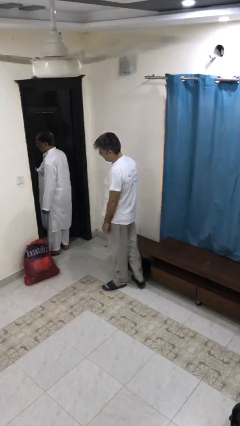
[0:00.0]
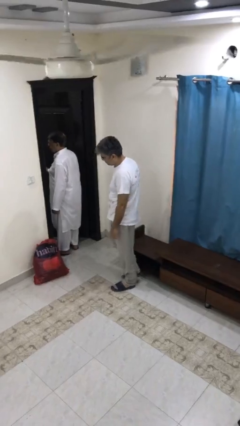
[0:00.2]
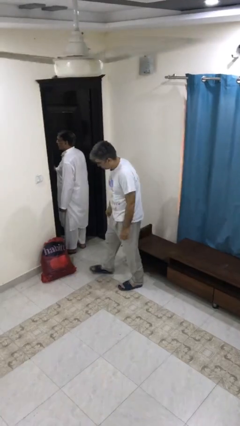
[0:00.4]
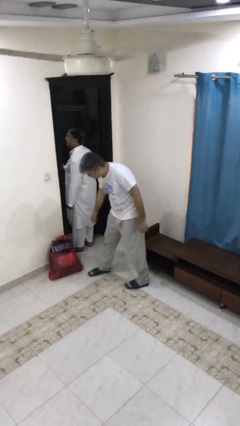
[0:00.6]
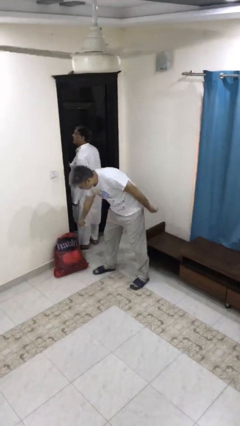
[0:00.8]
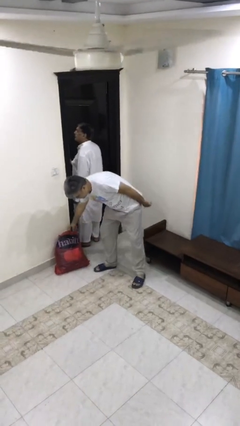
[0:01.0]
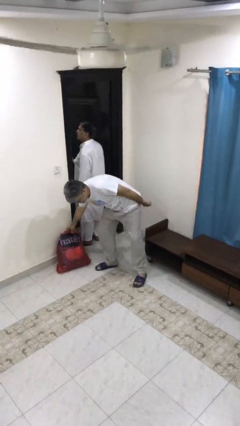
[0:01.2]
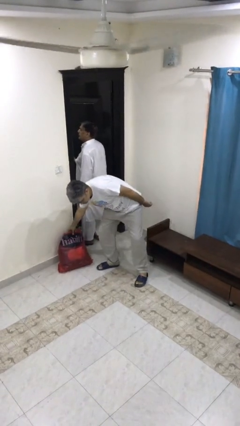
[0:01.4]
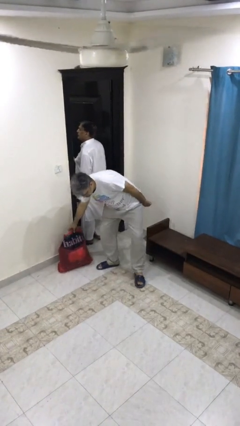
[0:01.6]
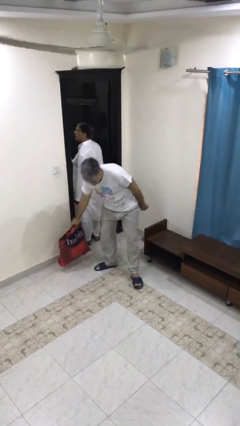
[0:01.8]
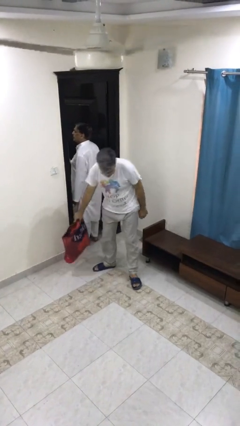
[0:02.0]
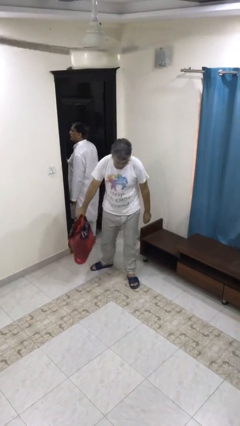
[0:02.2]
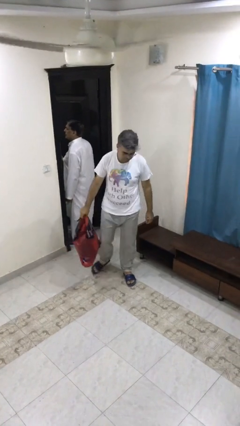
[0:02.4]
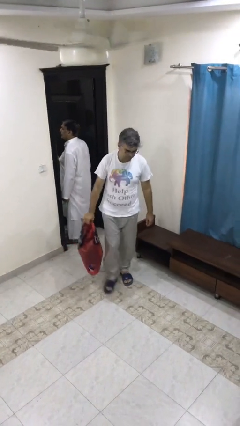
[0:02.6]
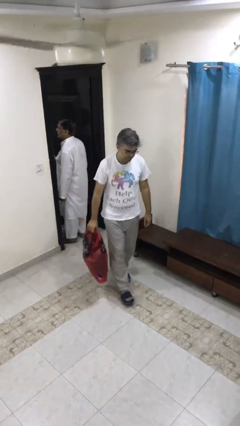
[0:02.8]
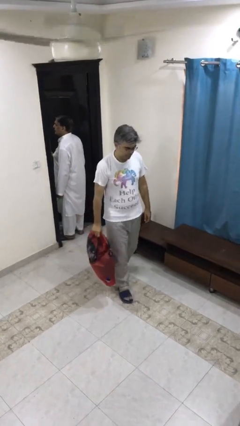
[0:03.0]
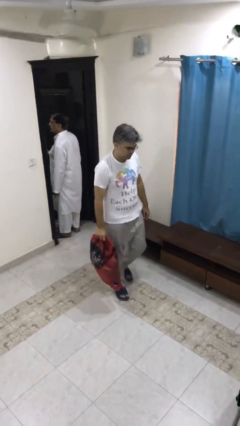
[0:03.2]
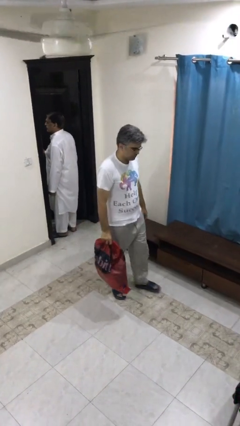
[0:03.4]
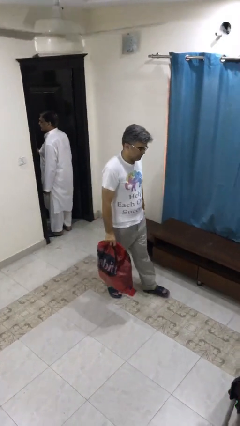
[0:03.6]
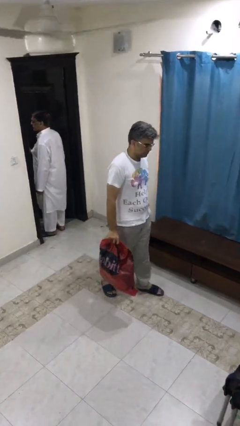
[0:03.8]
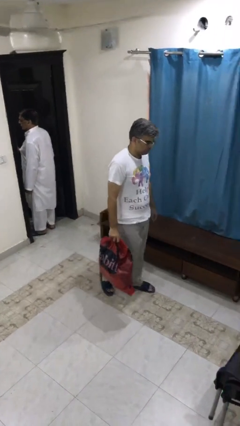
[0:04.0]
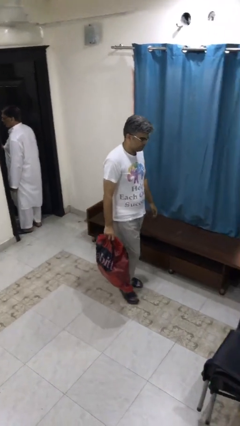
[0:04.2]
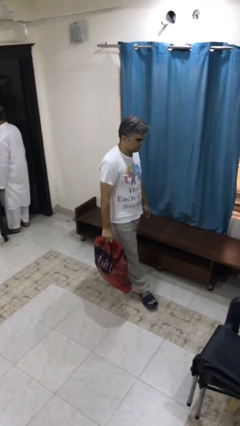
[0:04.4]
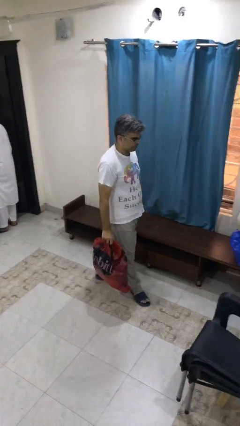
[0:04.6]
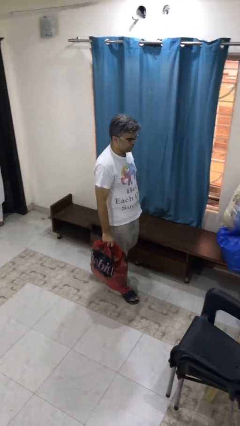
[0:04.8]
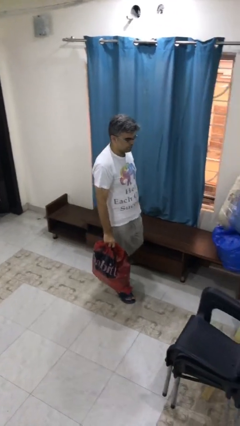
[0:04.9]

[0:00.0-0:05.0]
person steals object from person

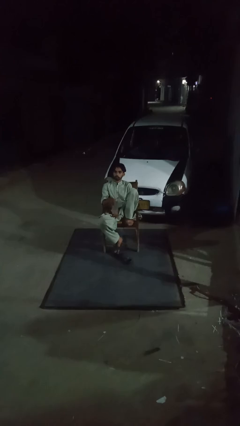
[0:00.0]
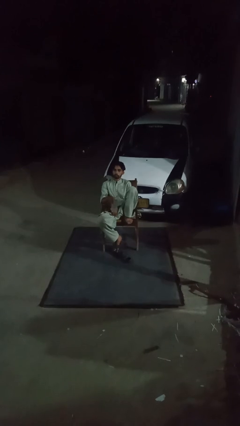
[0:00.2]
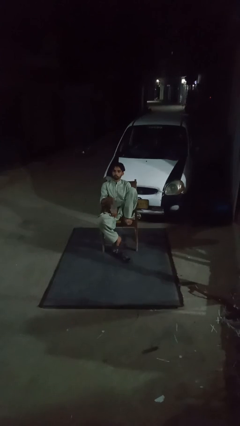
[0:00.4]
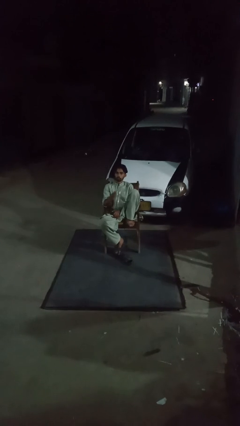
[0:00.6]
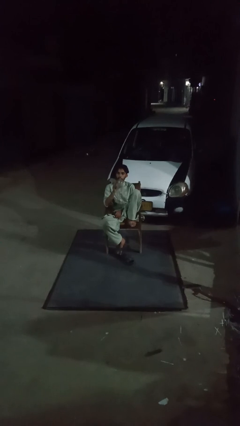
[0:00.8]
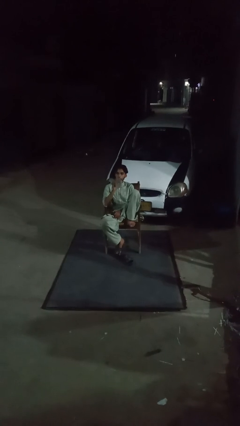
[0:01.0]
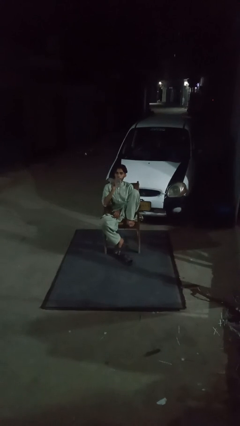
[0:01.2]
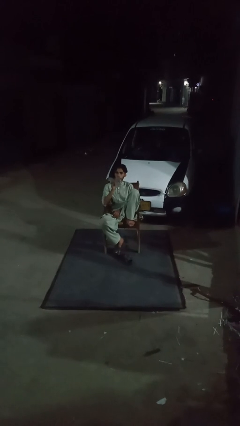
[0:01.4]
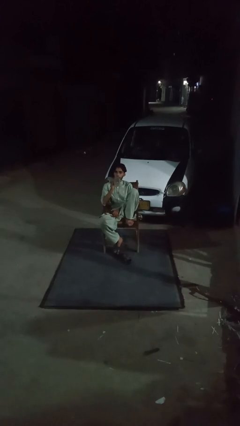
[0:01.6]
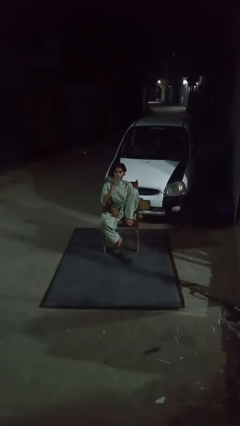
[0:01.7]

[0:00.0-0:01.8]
person drinks from bottle

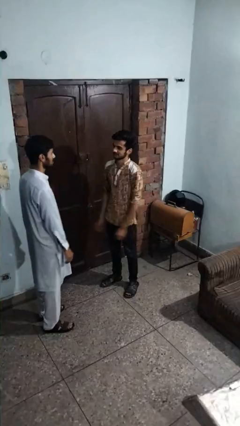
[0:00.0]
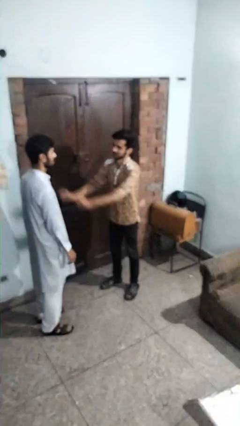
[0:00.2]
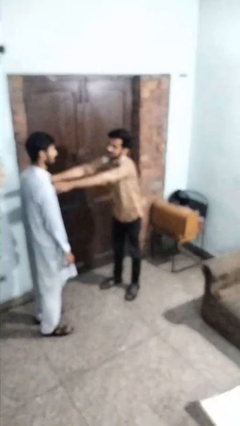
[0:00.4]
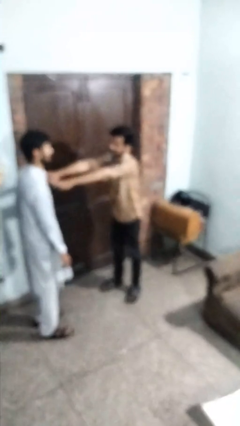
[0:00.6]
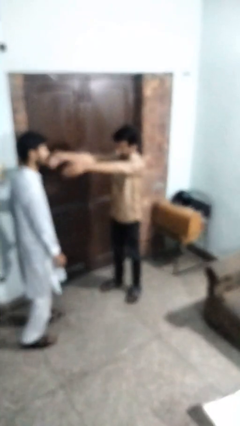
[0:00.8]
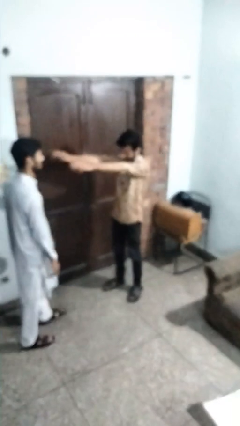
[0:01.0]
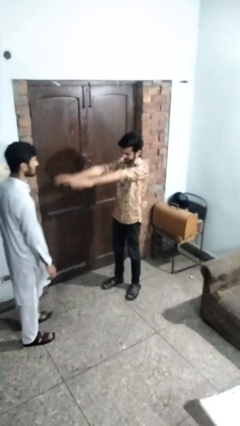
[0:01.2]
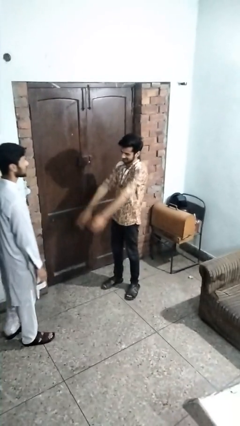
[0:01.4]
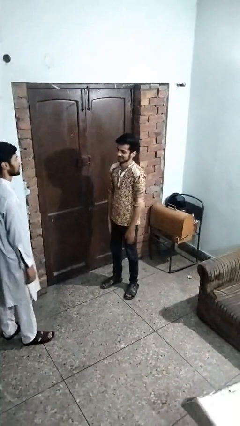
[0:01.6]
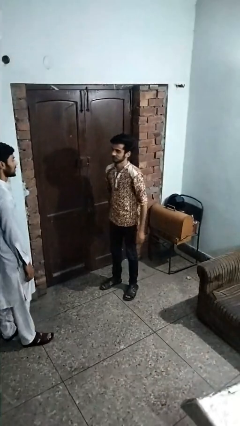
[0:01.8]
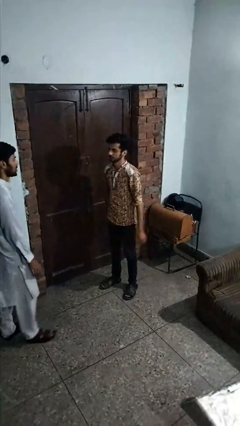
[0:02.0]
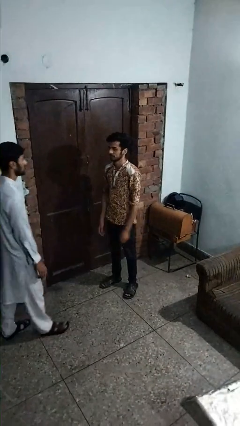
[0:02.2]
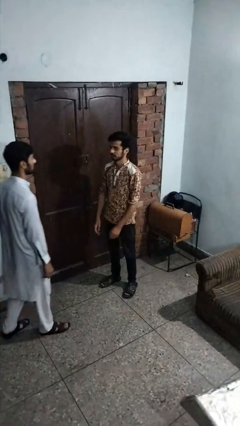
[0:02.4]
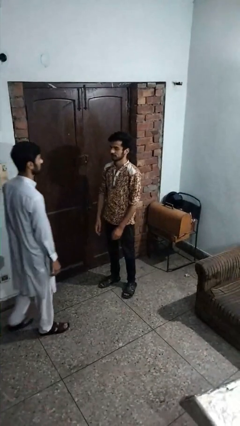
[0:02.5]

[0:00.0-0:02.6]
person shoves person

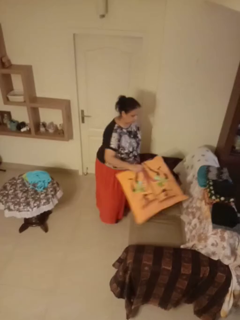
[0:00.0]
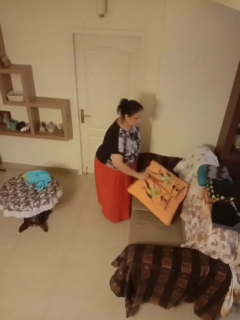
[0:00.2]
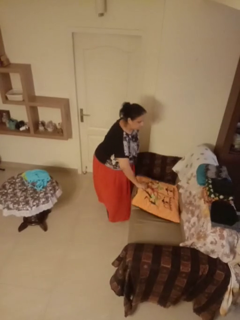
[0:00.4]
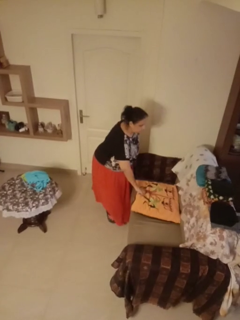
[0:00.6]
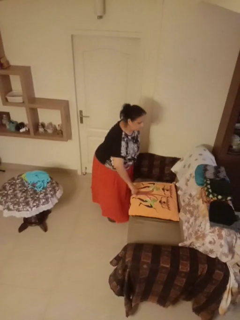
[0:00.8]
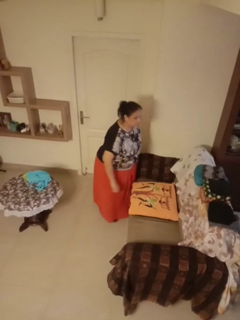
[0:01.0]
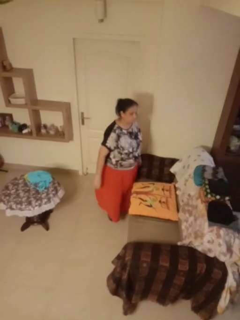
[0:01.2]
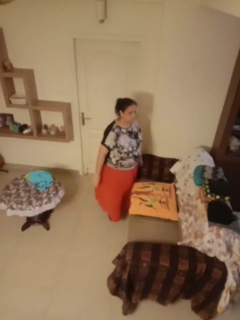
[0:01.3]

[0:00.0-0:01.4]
person puts down object on couch

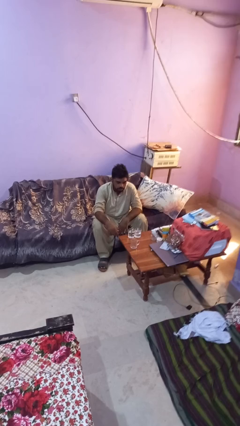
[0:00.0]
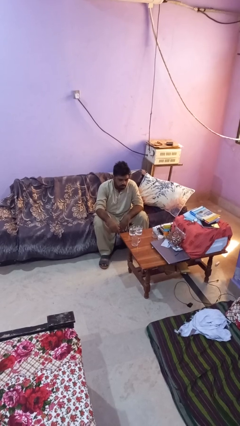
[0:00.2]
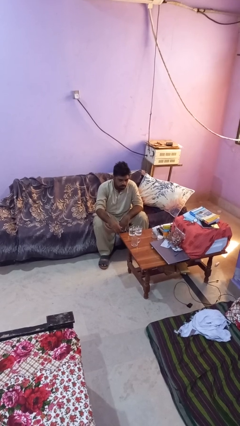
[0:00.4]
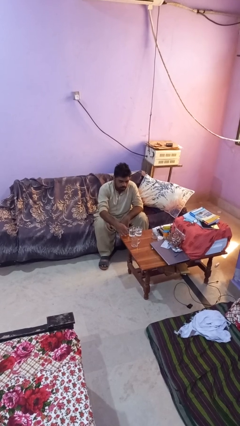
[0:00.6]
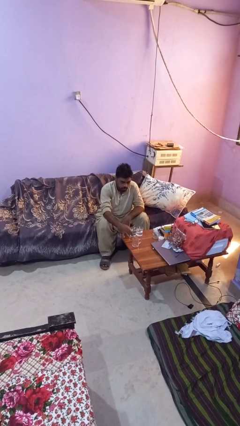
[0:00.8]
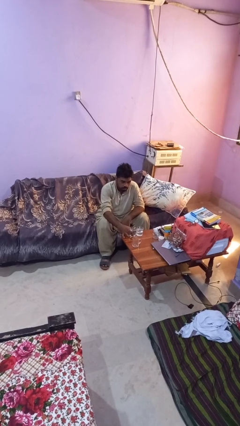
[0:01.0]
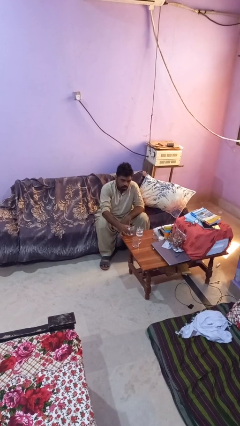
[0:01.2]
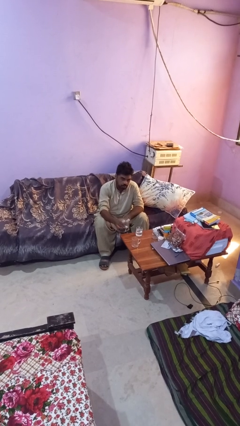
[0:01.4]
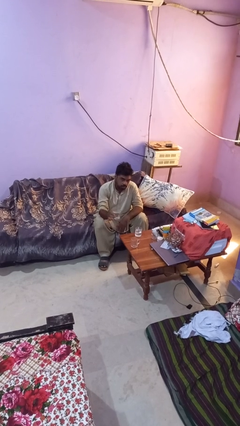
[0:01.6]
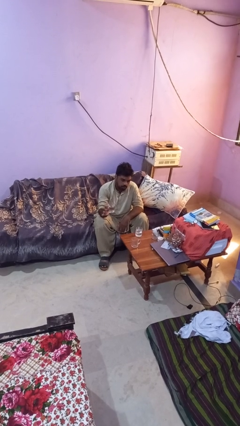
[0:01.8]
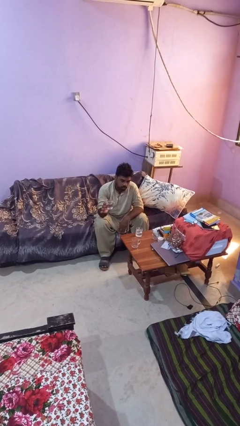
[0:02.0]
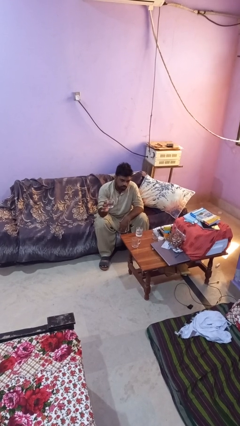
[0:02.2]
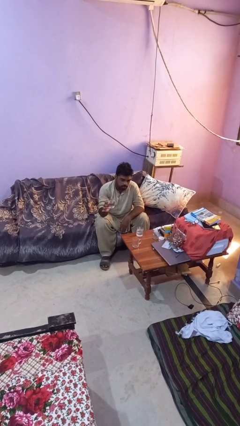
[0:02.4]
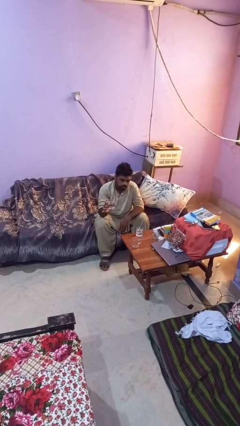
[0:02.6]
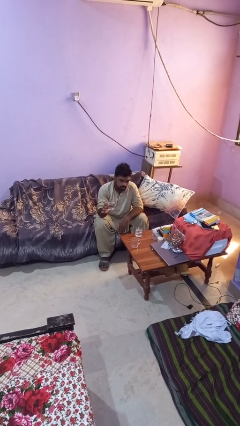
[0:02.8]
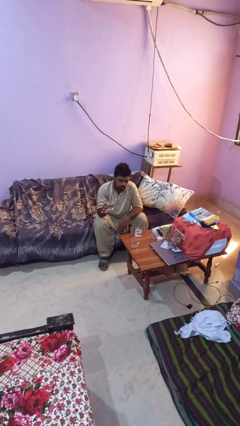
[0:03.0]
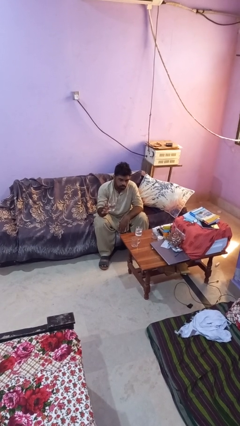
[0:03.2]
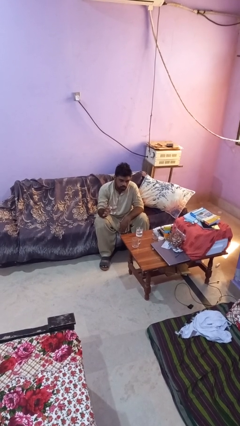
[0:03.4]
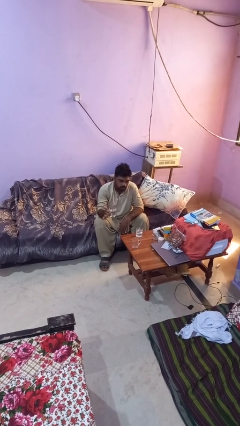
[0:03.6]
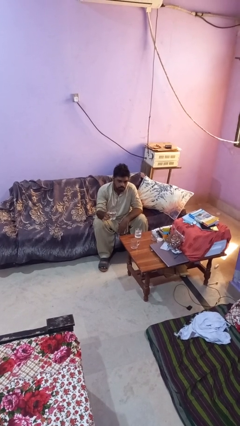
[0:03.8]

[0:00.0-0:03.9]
person picks up object from table

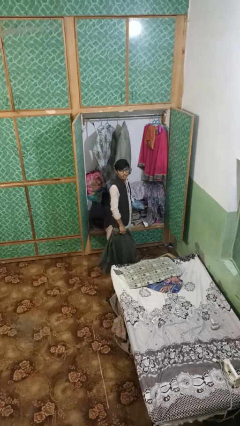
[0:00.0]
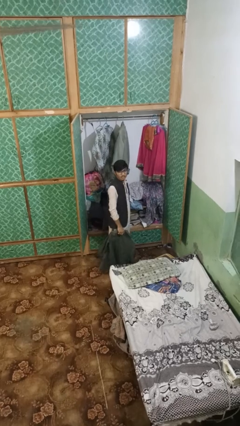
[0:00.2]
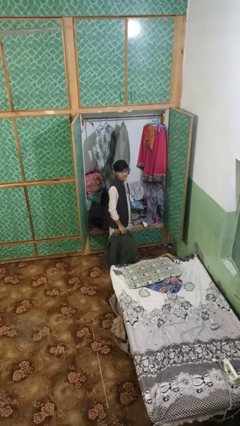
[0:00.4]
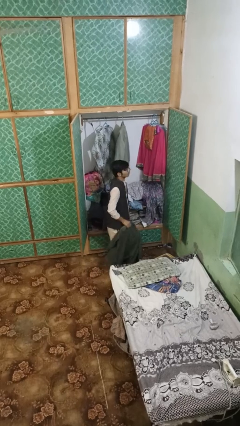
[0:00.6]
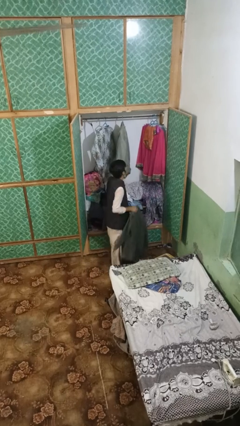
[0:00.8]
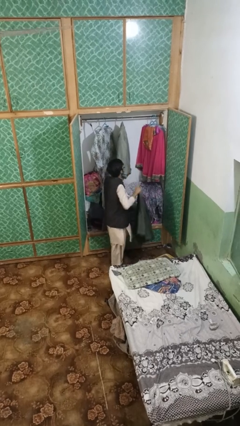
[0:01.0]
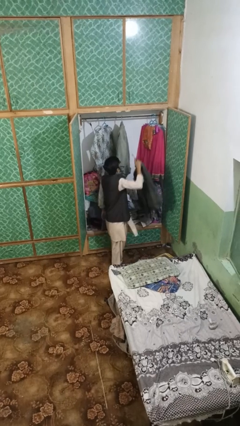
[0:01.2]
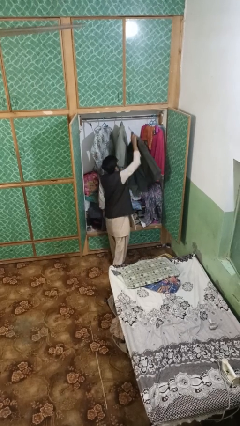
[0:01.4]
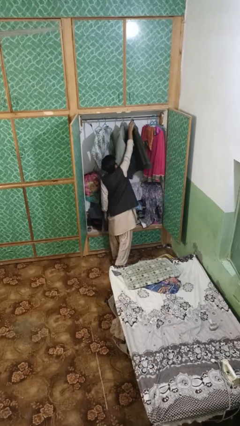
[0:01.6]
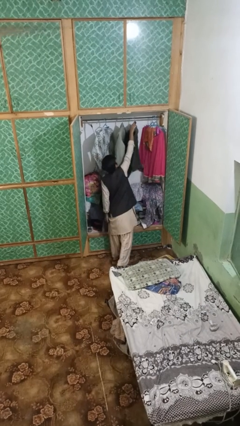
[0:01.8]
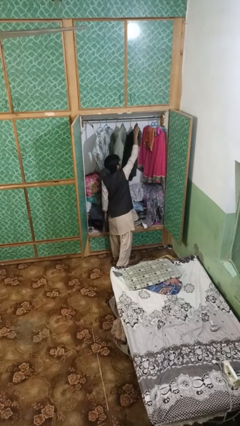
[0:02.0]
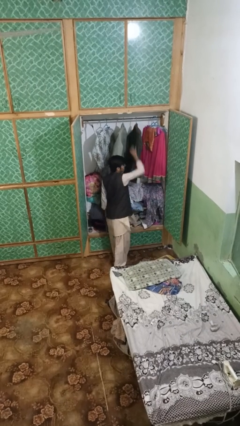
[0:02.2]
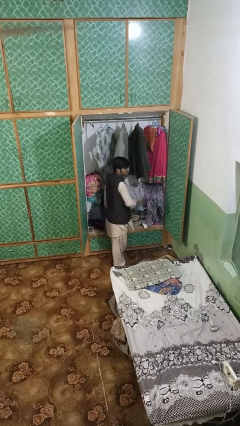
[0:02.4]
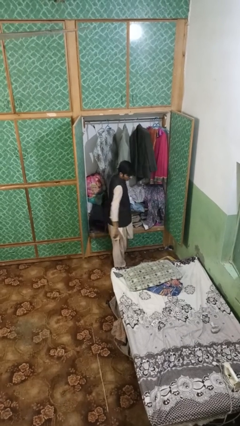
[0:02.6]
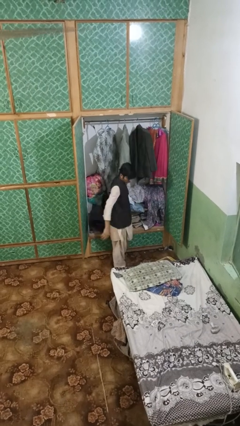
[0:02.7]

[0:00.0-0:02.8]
person puts clothes into closet

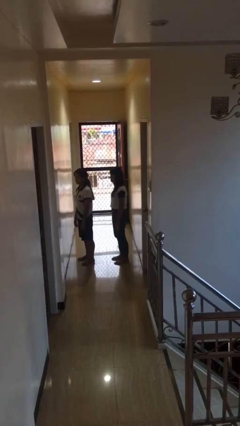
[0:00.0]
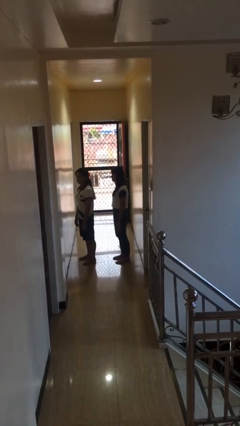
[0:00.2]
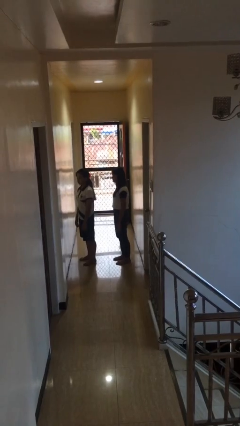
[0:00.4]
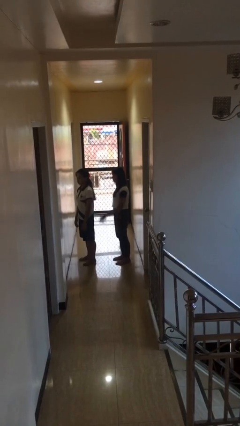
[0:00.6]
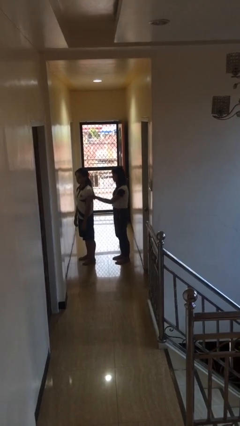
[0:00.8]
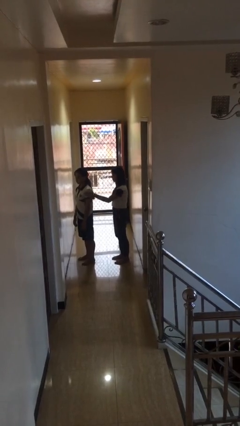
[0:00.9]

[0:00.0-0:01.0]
person grabs person by shoulder
